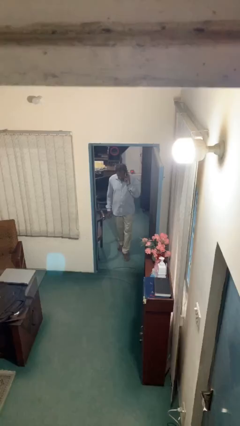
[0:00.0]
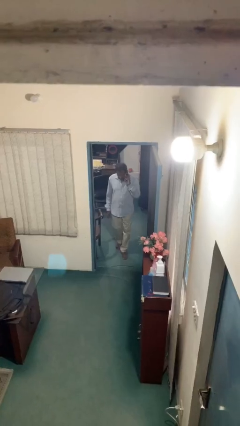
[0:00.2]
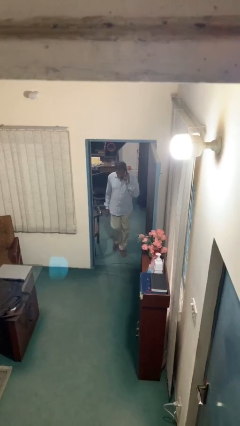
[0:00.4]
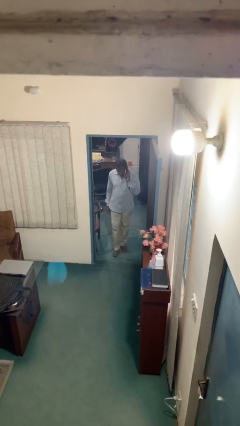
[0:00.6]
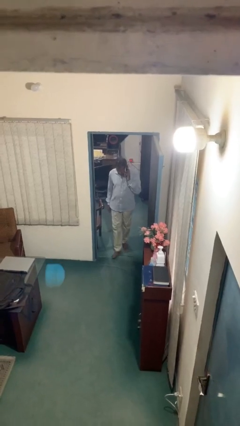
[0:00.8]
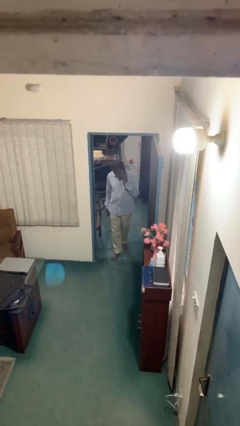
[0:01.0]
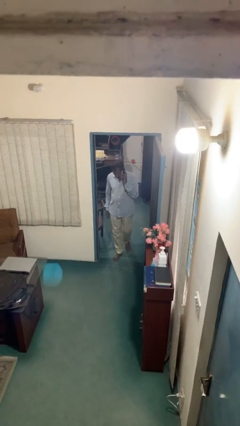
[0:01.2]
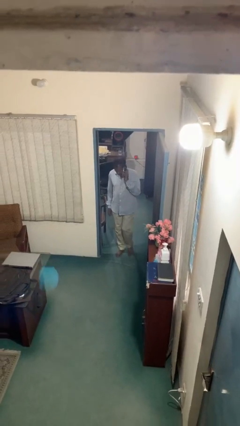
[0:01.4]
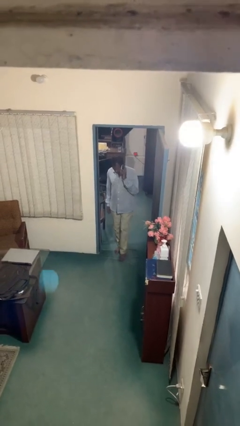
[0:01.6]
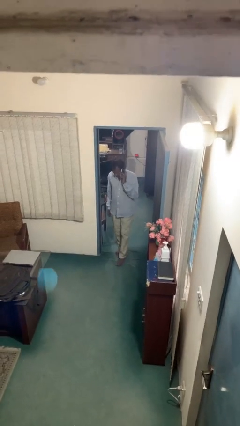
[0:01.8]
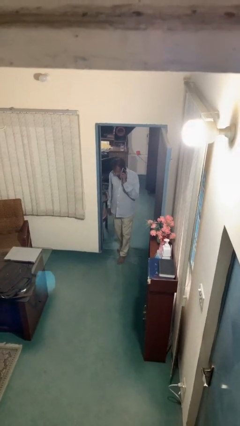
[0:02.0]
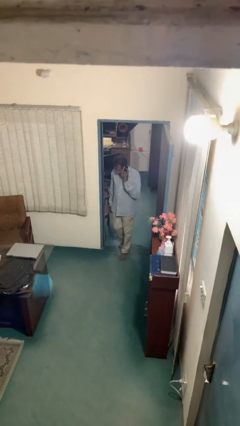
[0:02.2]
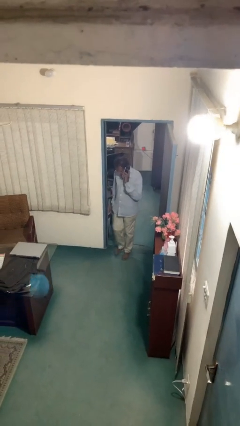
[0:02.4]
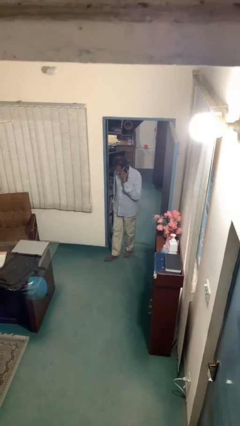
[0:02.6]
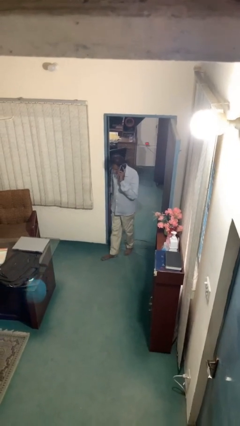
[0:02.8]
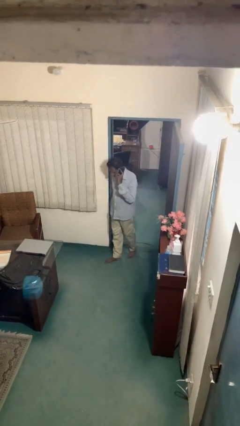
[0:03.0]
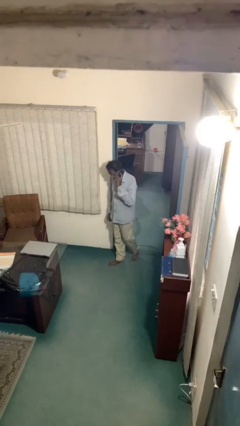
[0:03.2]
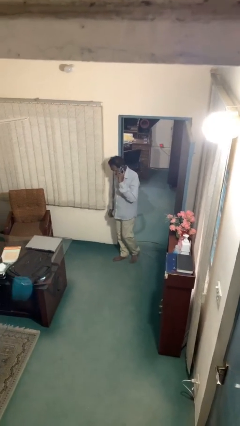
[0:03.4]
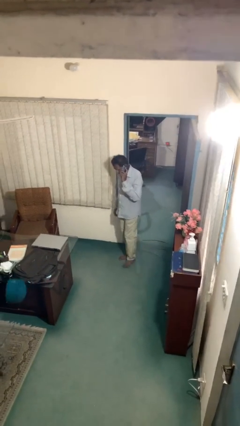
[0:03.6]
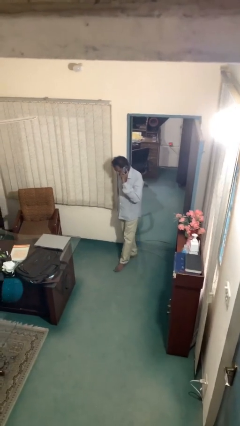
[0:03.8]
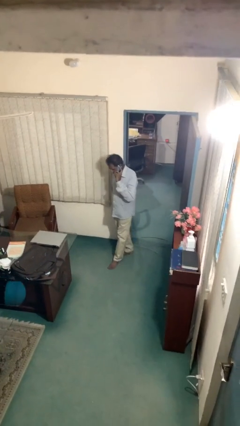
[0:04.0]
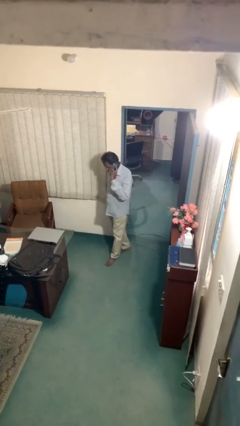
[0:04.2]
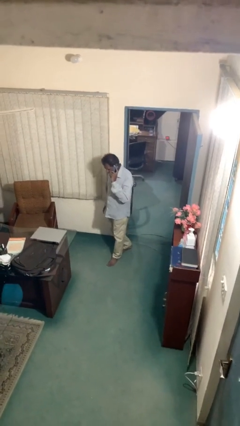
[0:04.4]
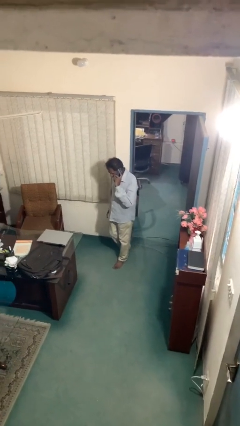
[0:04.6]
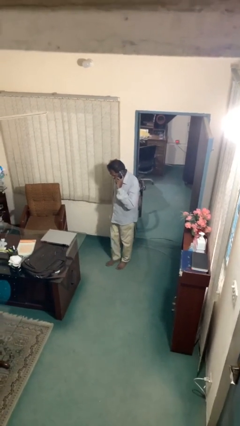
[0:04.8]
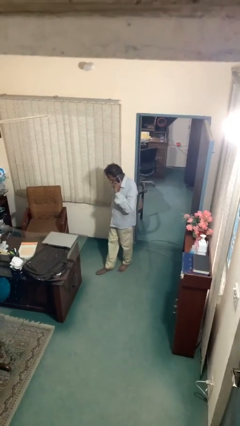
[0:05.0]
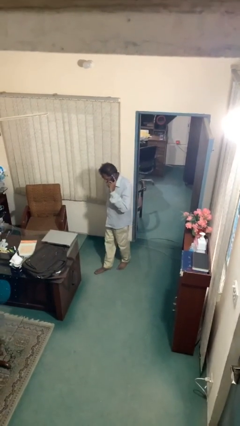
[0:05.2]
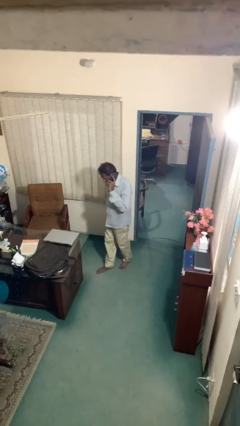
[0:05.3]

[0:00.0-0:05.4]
person enters scene through structure

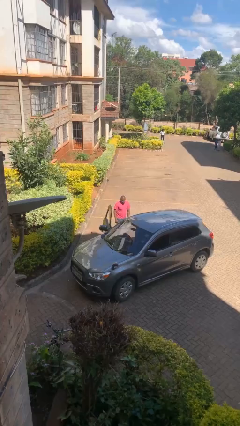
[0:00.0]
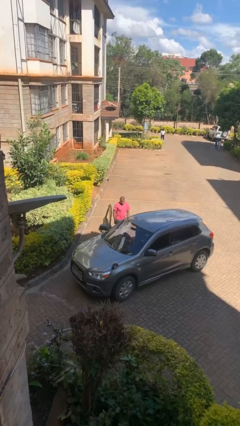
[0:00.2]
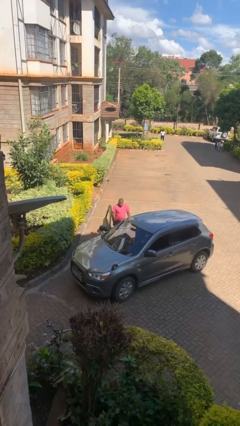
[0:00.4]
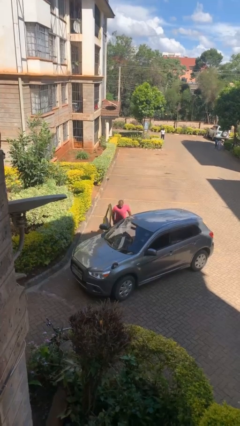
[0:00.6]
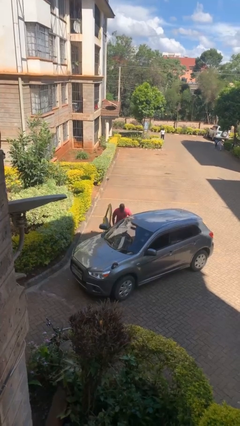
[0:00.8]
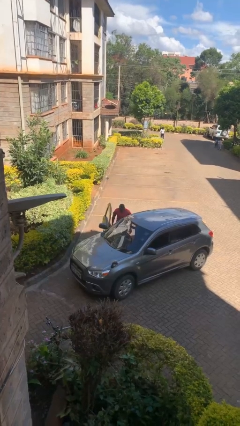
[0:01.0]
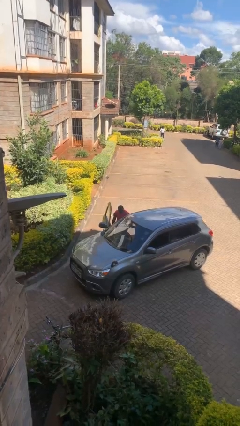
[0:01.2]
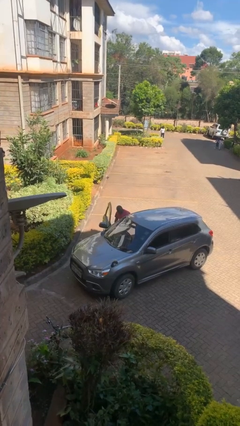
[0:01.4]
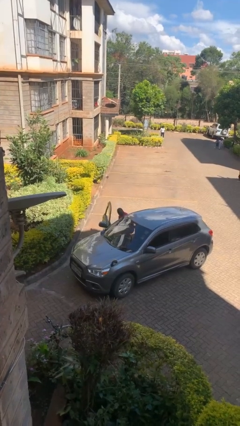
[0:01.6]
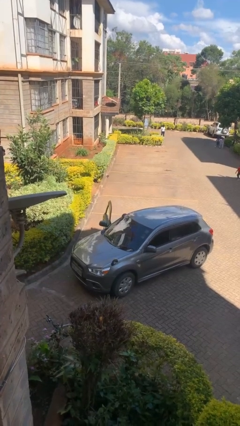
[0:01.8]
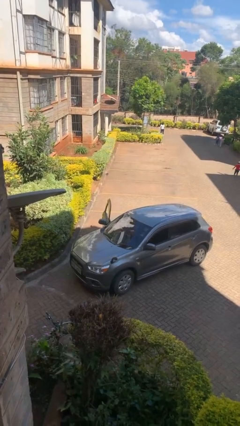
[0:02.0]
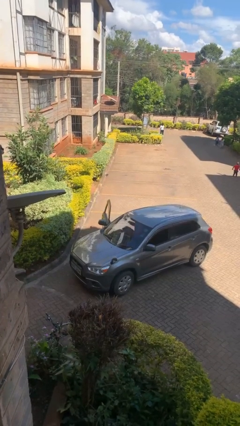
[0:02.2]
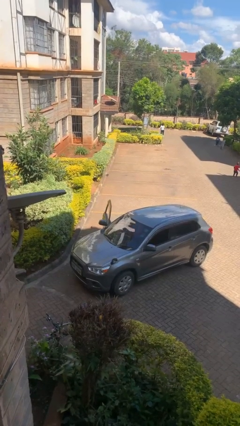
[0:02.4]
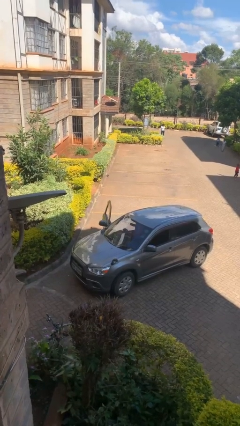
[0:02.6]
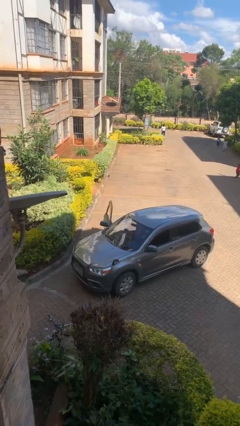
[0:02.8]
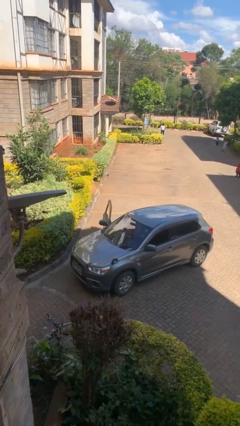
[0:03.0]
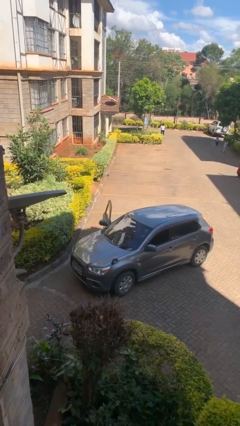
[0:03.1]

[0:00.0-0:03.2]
person enters car

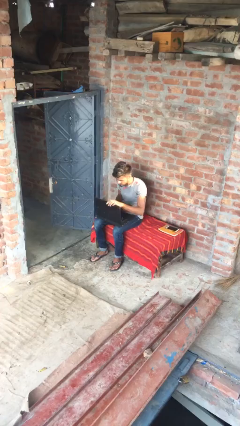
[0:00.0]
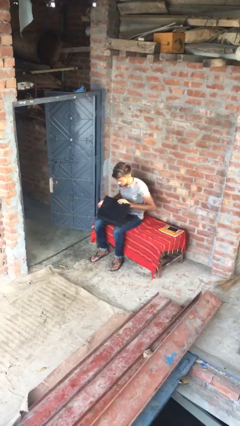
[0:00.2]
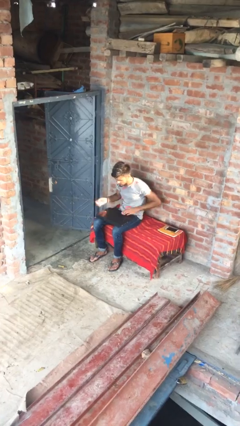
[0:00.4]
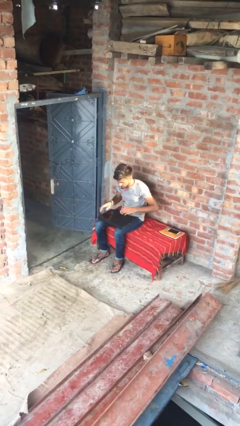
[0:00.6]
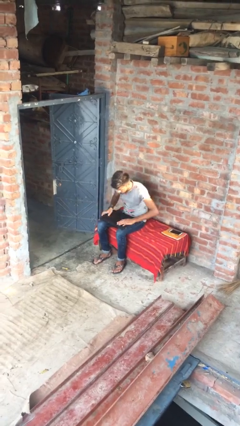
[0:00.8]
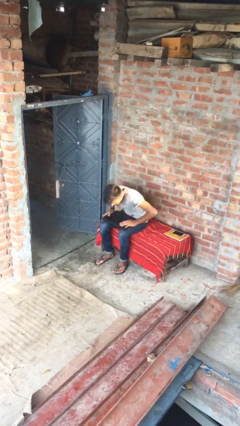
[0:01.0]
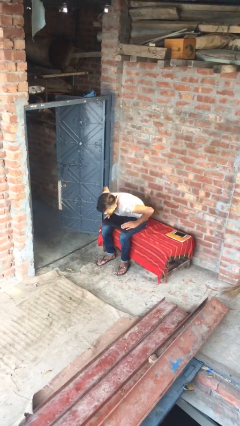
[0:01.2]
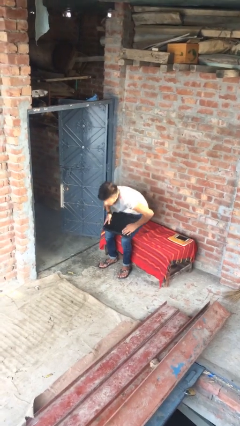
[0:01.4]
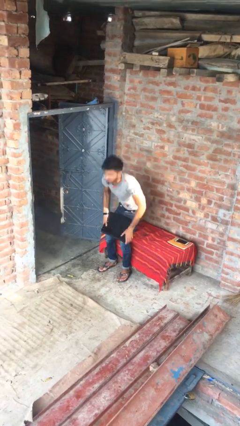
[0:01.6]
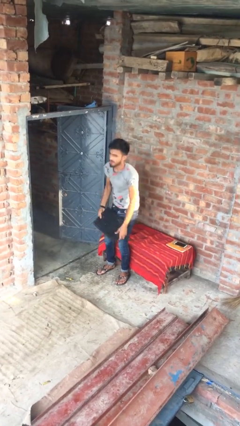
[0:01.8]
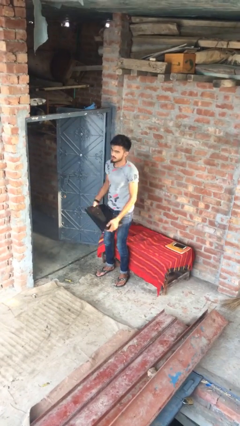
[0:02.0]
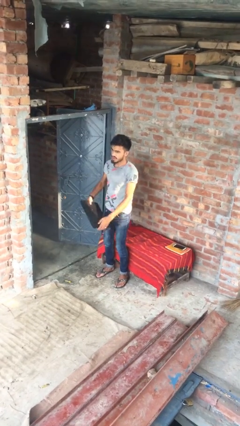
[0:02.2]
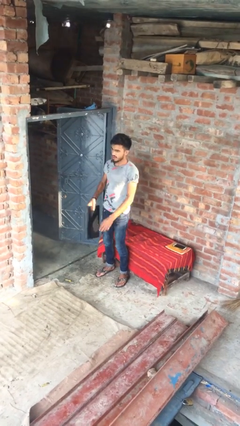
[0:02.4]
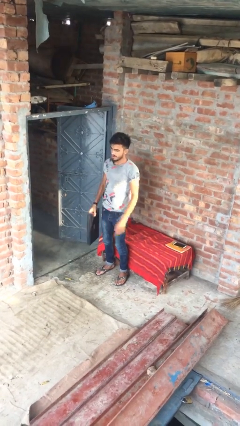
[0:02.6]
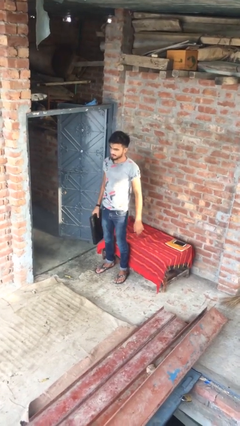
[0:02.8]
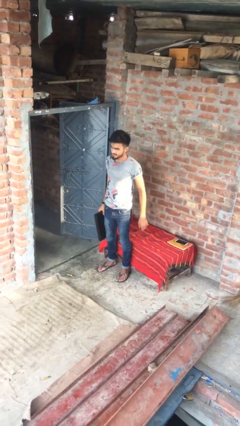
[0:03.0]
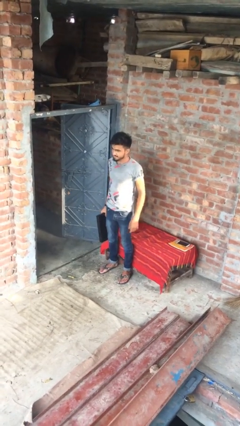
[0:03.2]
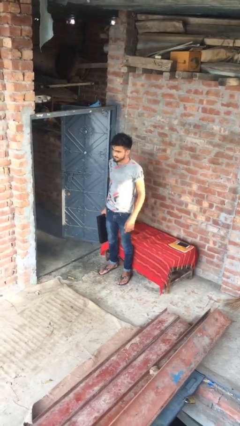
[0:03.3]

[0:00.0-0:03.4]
person stands up

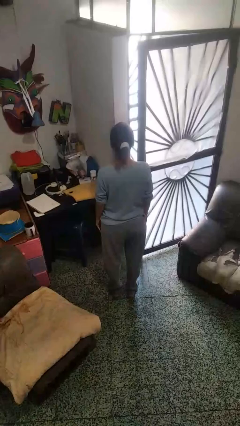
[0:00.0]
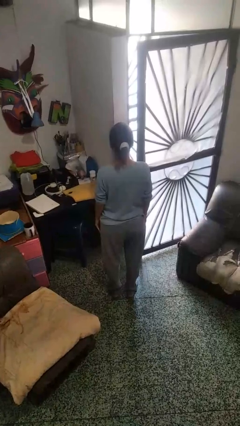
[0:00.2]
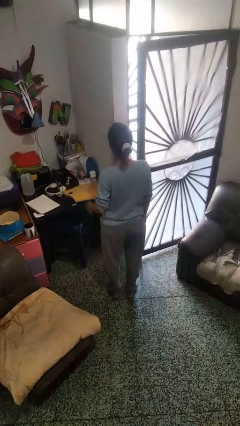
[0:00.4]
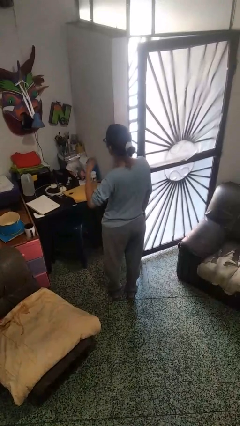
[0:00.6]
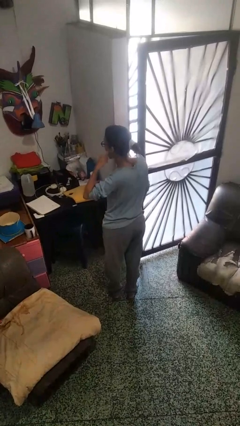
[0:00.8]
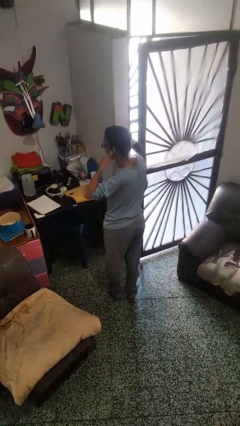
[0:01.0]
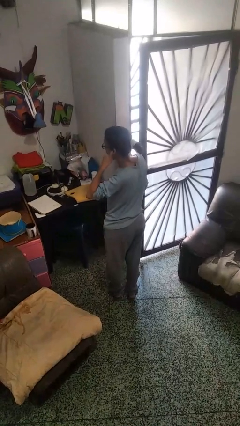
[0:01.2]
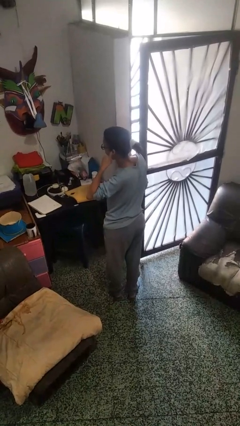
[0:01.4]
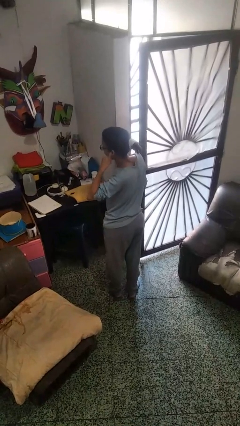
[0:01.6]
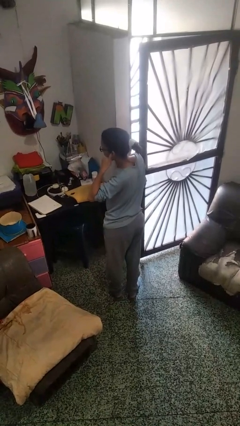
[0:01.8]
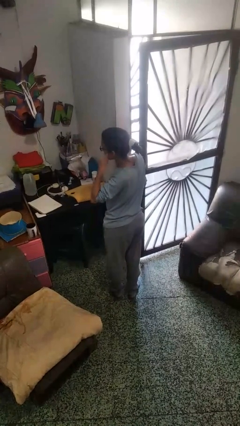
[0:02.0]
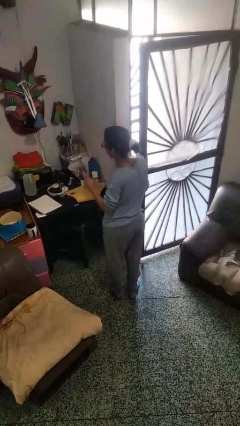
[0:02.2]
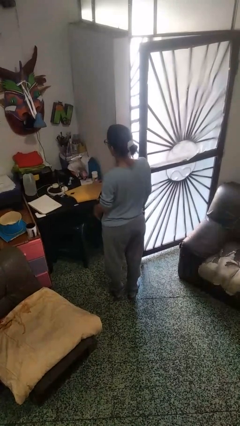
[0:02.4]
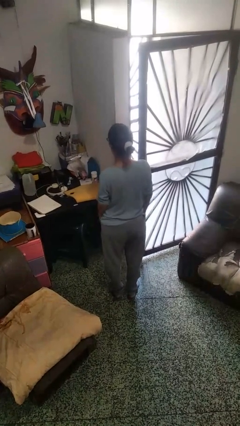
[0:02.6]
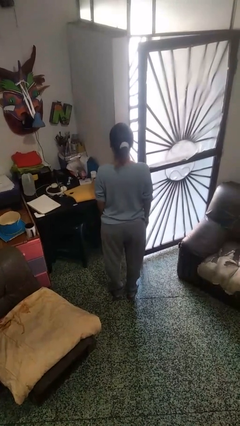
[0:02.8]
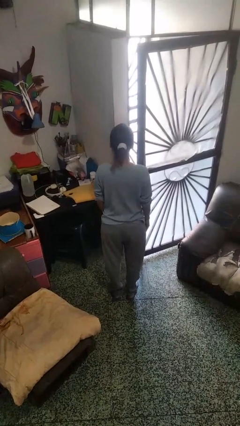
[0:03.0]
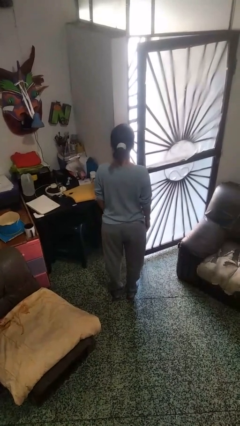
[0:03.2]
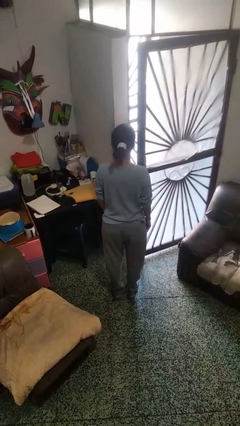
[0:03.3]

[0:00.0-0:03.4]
person gestures call me

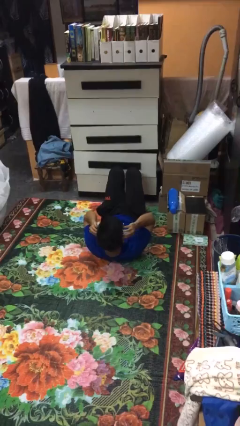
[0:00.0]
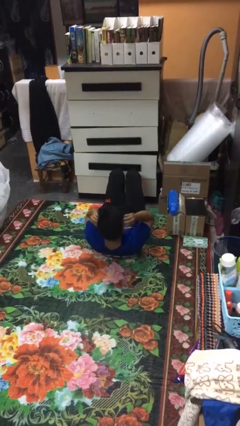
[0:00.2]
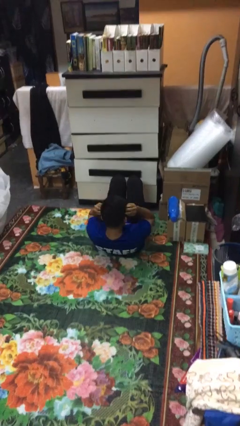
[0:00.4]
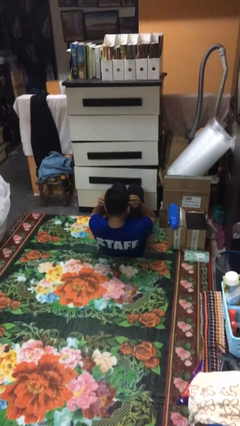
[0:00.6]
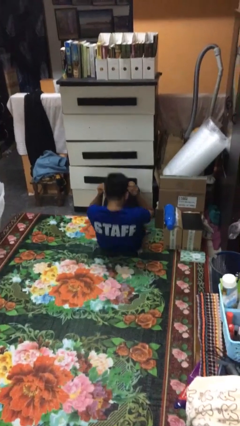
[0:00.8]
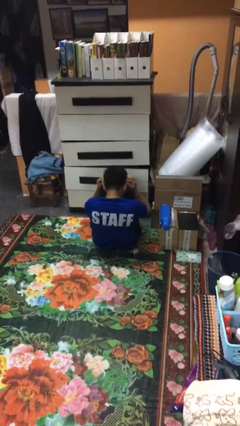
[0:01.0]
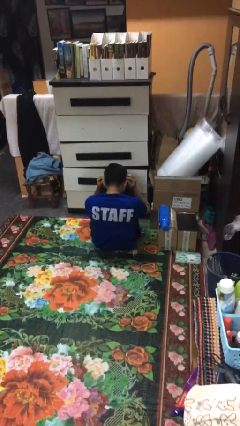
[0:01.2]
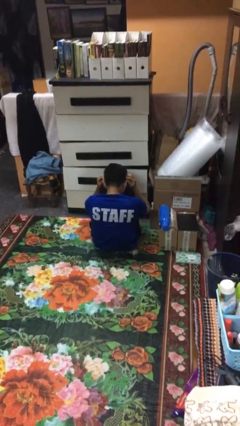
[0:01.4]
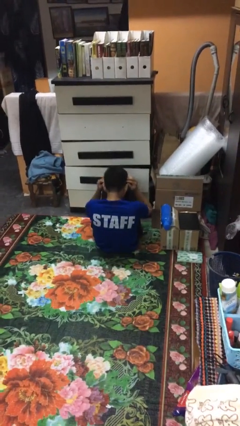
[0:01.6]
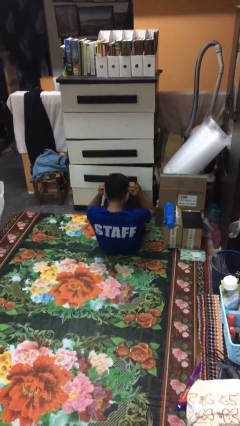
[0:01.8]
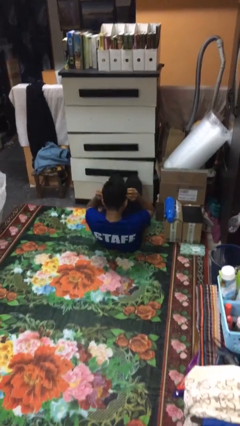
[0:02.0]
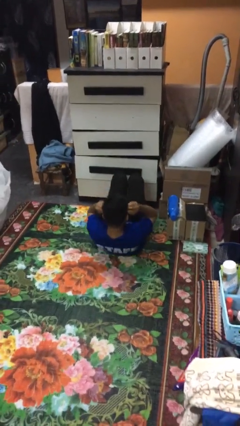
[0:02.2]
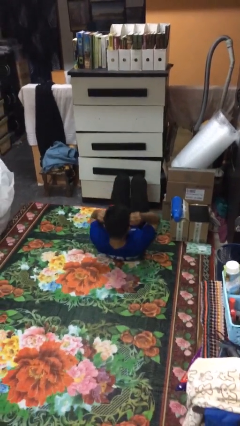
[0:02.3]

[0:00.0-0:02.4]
person exercises with situp
